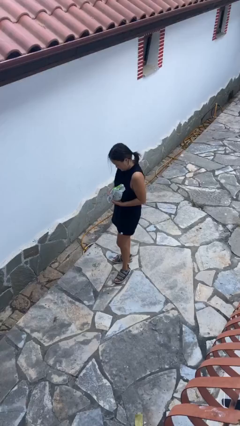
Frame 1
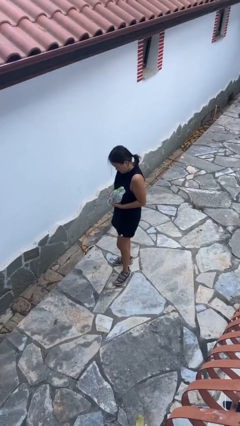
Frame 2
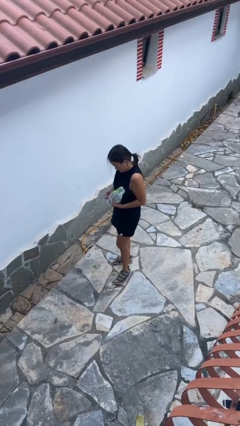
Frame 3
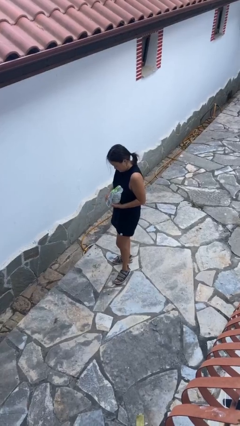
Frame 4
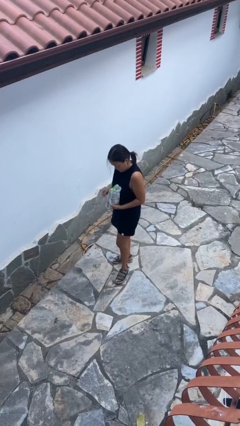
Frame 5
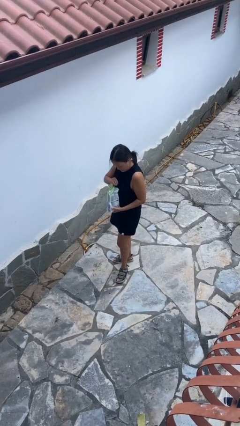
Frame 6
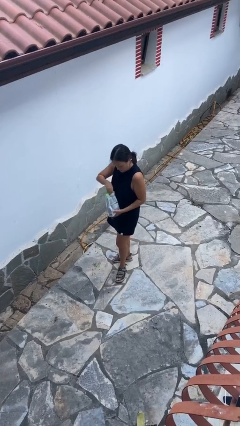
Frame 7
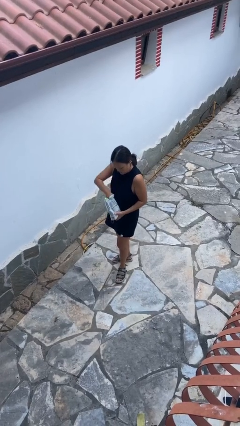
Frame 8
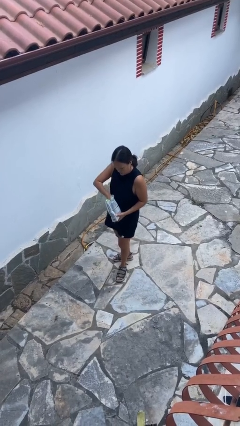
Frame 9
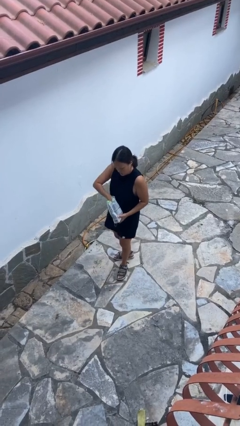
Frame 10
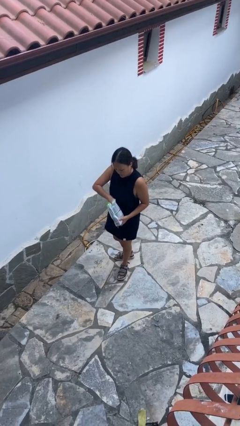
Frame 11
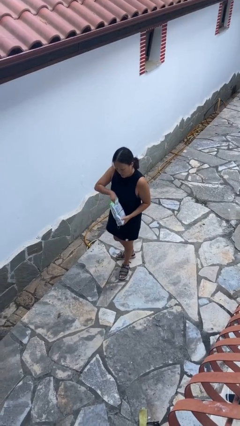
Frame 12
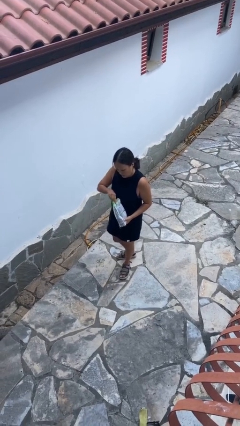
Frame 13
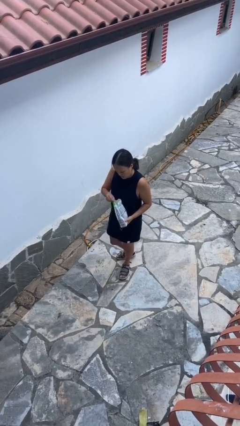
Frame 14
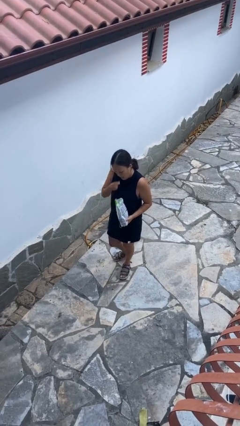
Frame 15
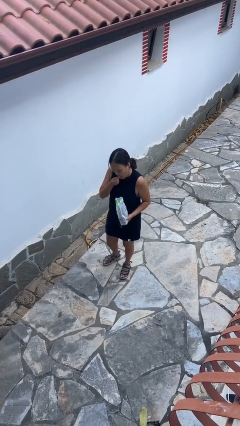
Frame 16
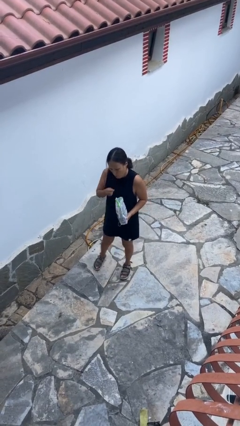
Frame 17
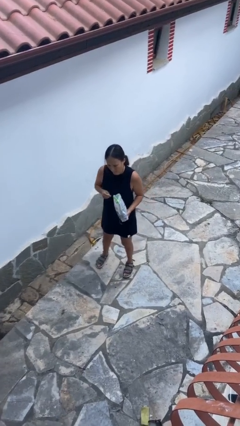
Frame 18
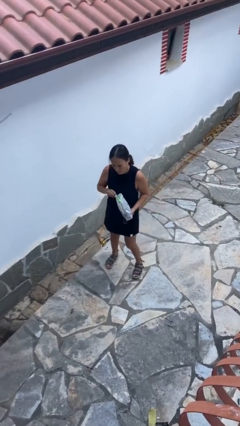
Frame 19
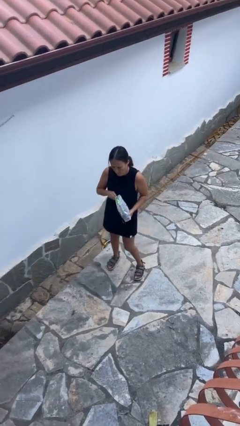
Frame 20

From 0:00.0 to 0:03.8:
person eats snack from bag

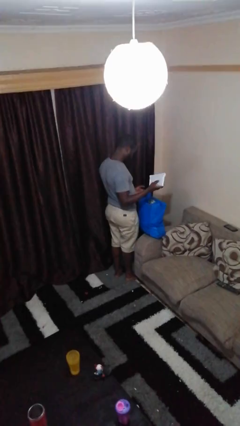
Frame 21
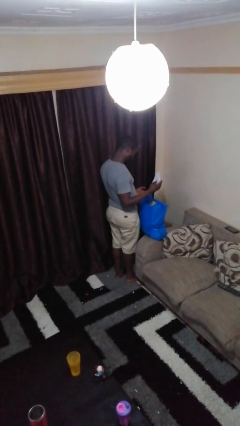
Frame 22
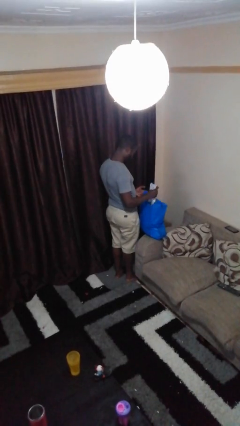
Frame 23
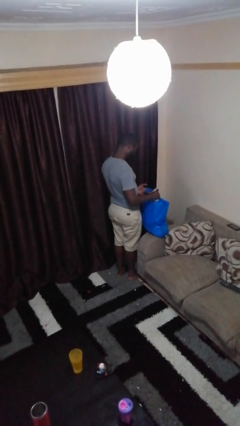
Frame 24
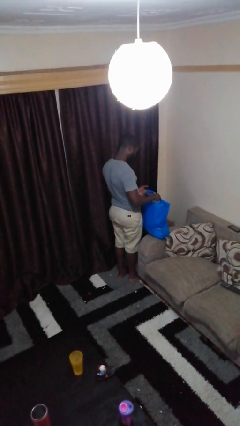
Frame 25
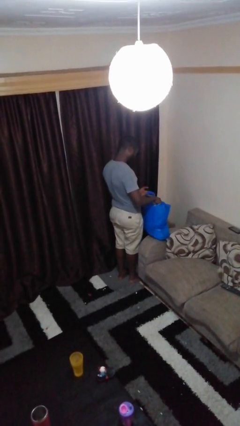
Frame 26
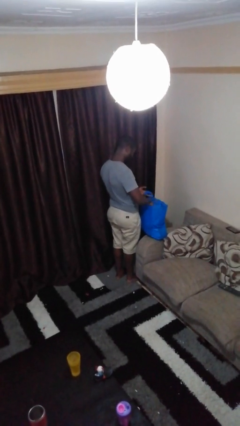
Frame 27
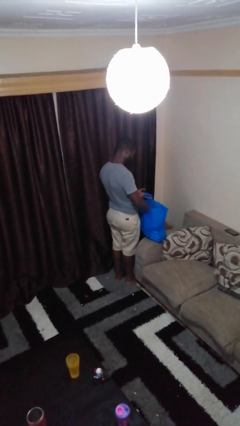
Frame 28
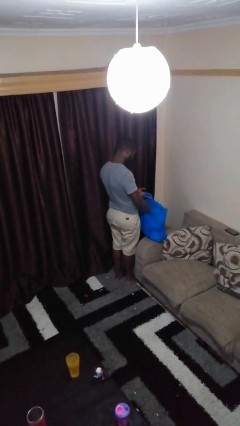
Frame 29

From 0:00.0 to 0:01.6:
person puts object into bag

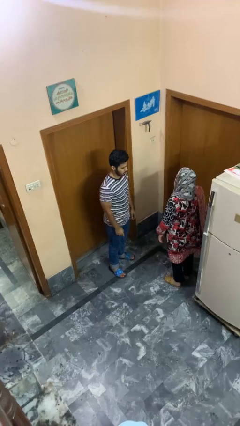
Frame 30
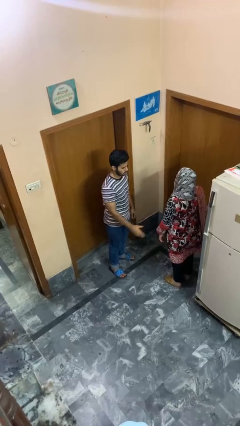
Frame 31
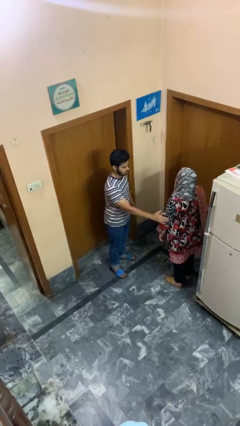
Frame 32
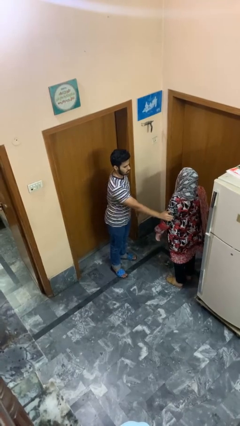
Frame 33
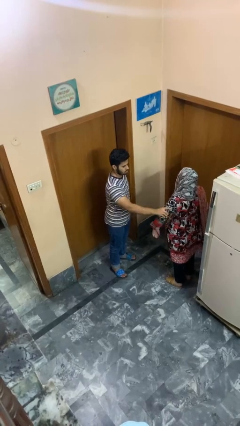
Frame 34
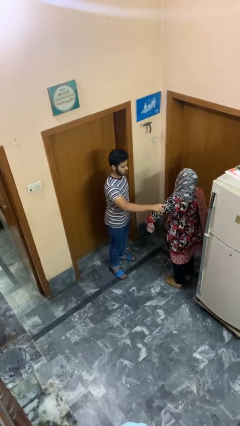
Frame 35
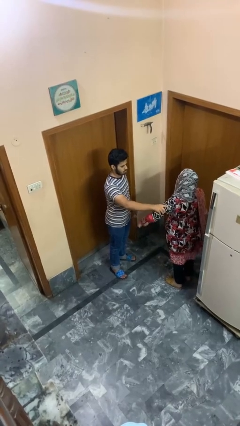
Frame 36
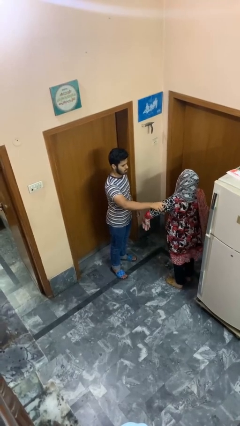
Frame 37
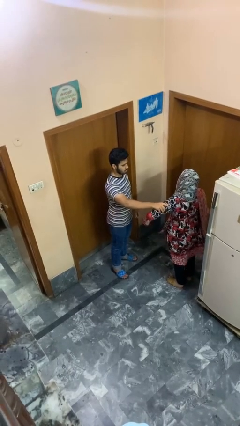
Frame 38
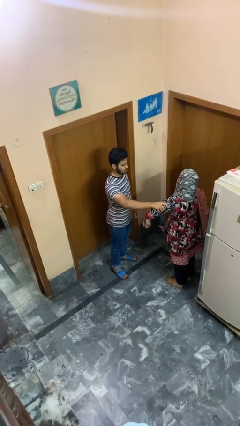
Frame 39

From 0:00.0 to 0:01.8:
person grabs person by bicep

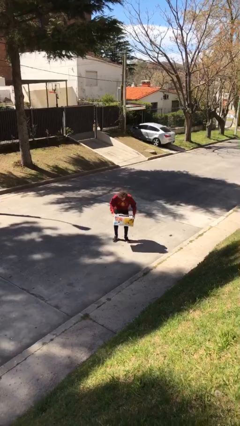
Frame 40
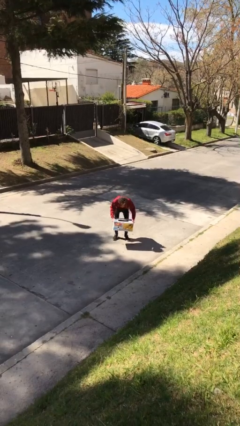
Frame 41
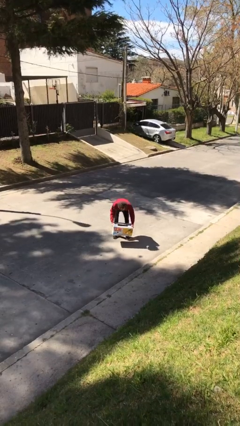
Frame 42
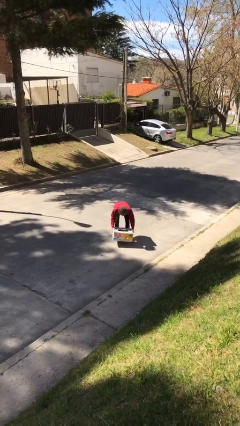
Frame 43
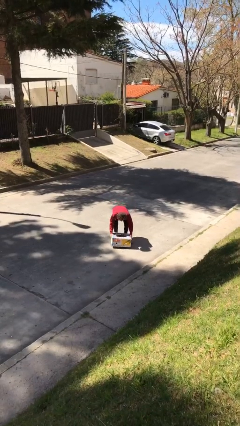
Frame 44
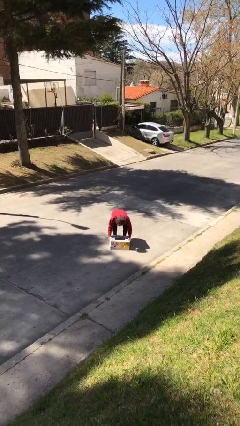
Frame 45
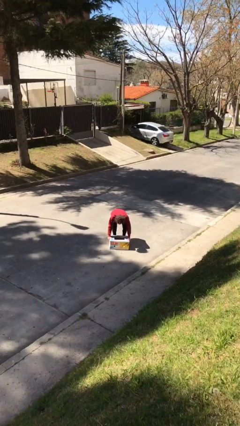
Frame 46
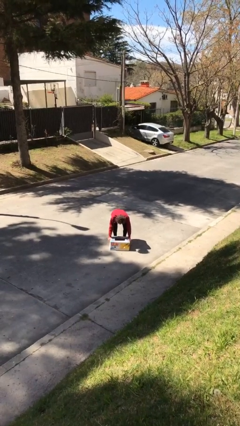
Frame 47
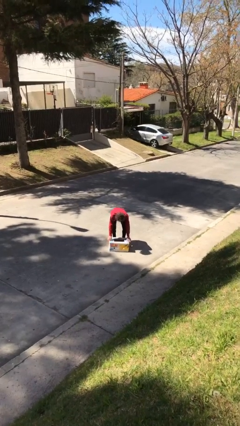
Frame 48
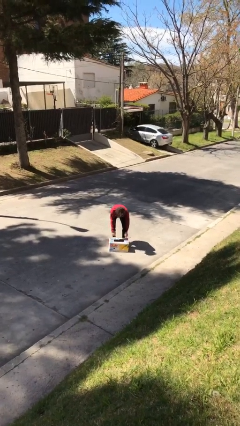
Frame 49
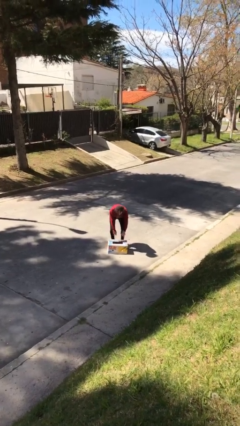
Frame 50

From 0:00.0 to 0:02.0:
person puts down object on floor

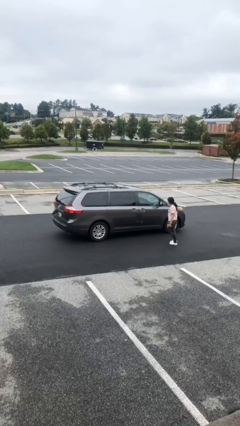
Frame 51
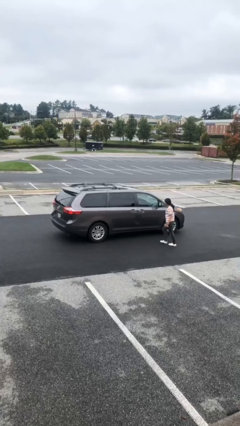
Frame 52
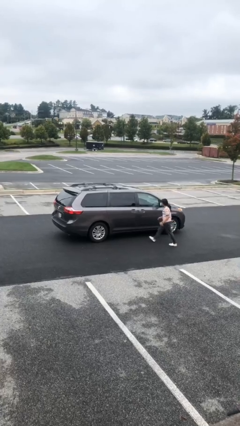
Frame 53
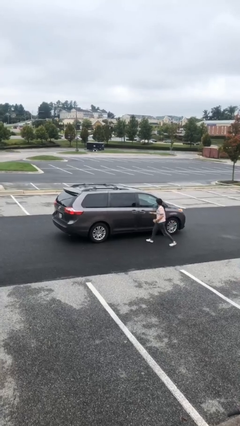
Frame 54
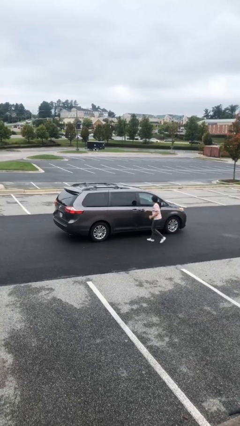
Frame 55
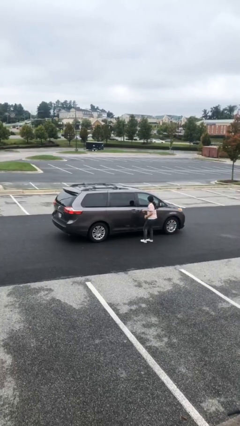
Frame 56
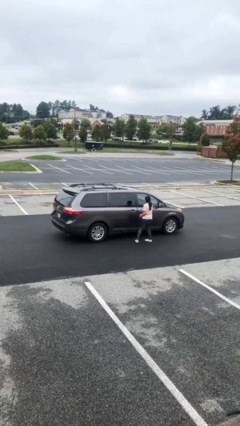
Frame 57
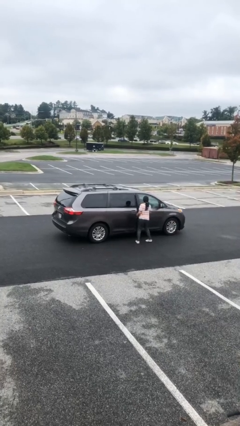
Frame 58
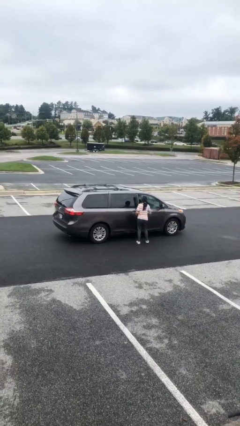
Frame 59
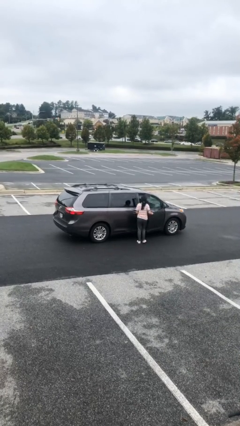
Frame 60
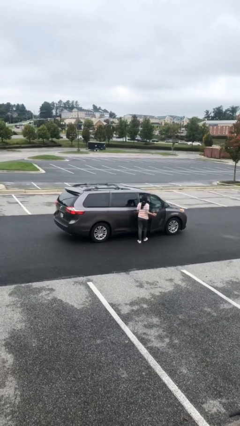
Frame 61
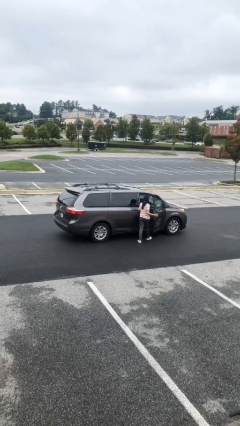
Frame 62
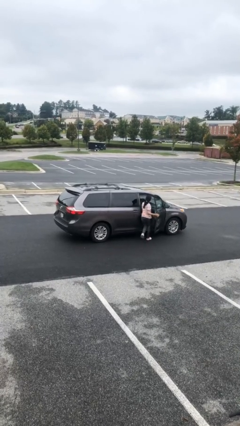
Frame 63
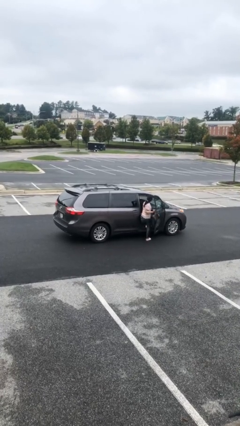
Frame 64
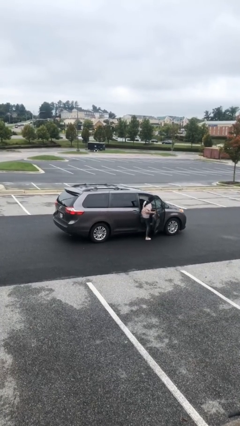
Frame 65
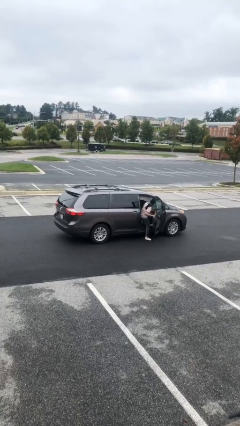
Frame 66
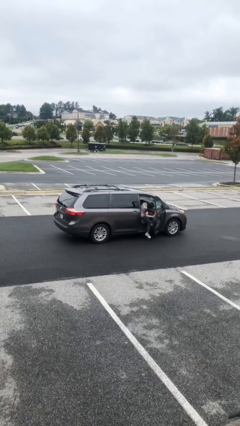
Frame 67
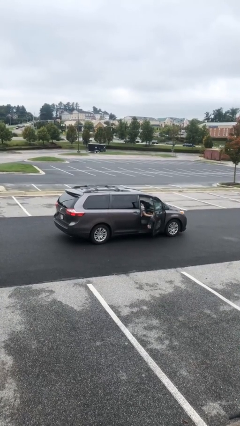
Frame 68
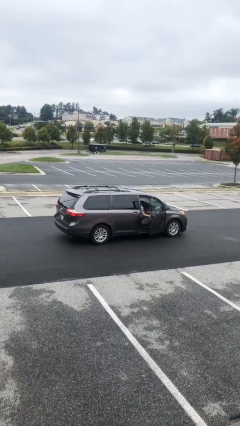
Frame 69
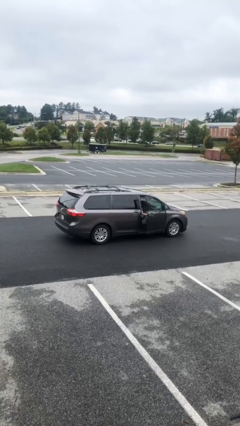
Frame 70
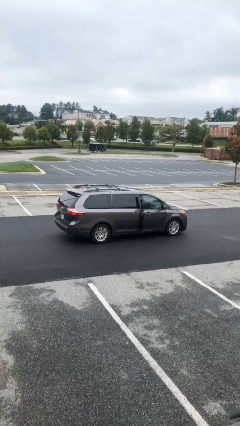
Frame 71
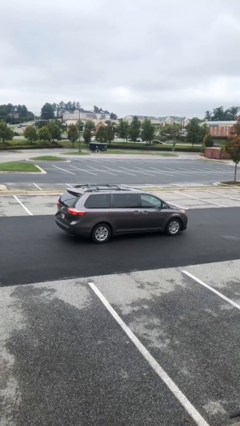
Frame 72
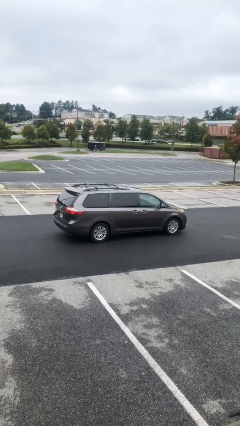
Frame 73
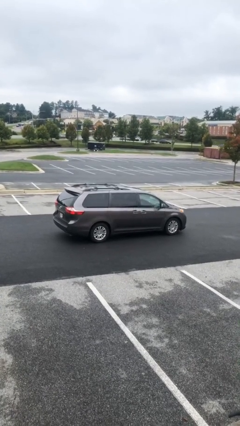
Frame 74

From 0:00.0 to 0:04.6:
car picks up person

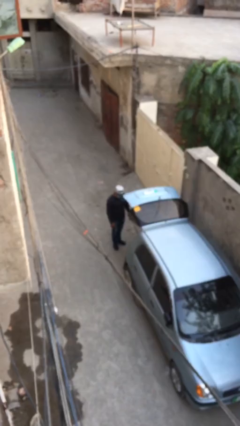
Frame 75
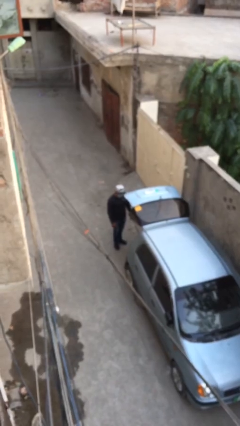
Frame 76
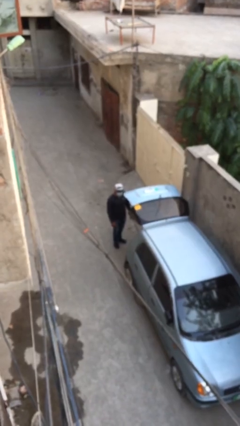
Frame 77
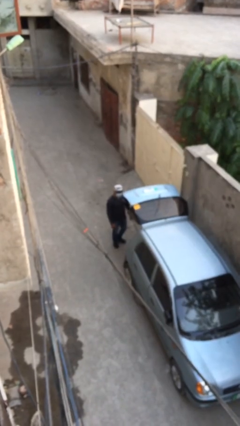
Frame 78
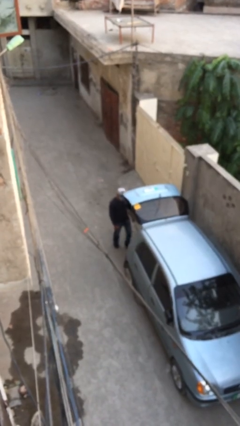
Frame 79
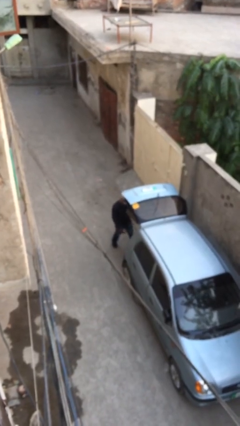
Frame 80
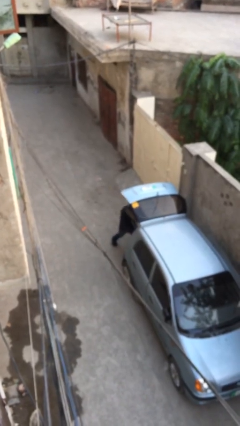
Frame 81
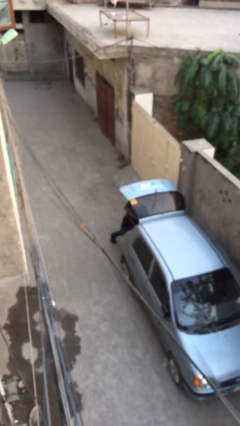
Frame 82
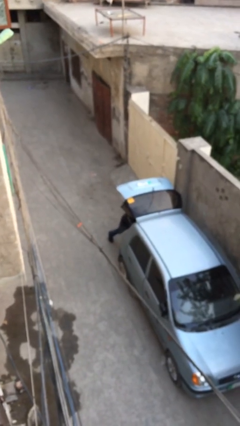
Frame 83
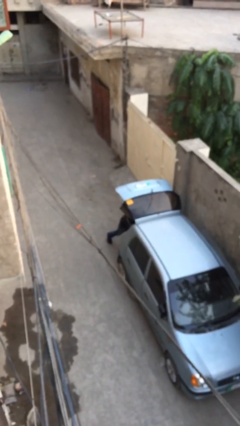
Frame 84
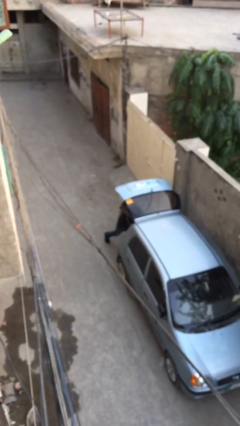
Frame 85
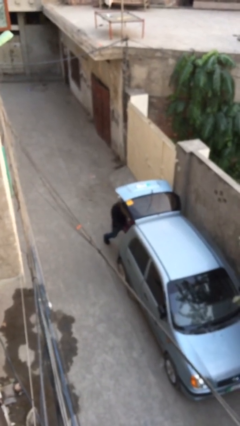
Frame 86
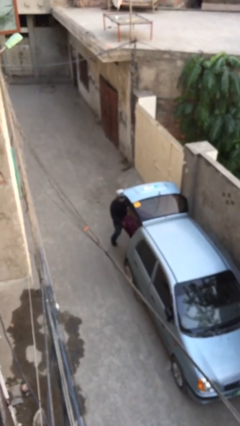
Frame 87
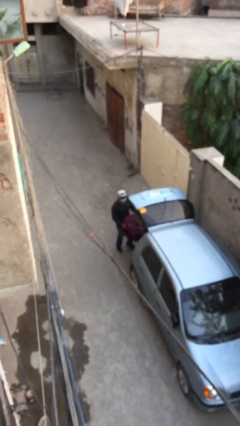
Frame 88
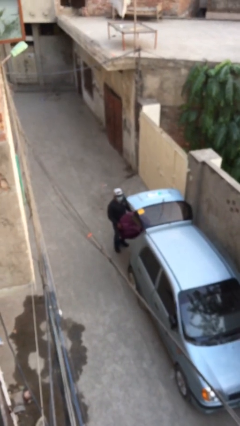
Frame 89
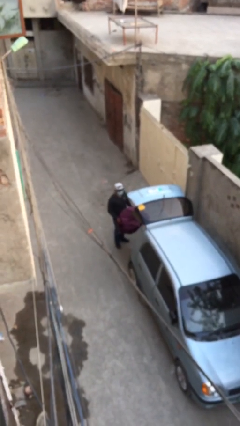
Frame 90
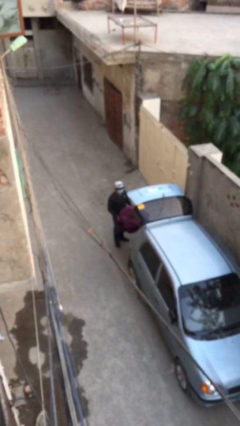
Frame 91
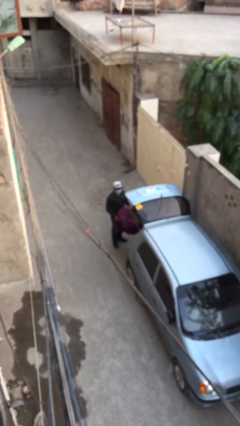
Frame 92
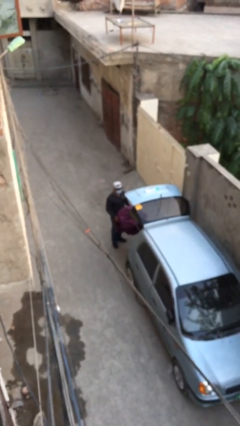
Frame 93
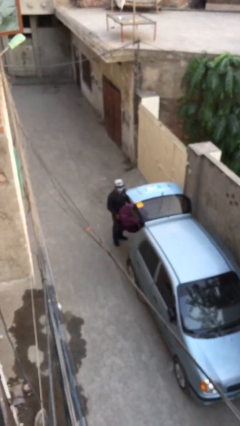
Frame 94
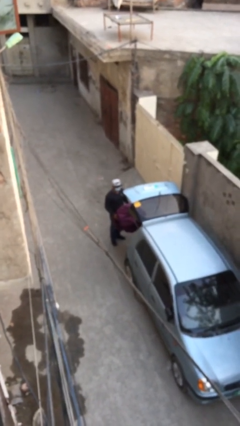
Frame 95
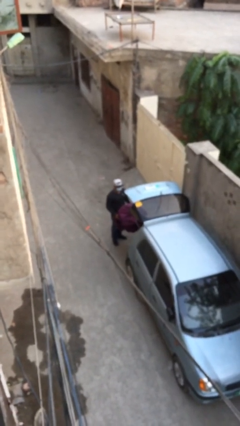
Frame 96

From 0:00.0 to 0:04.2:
person unloads car
